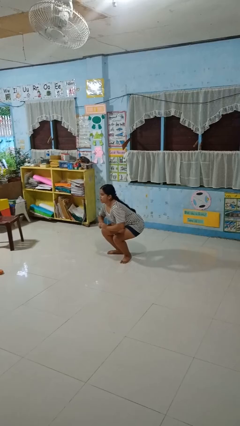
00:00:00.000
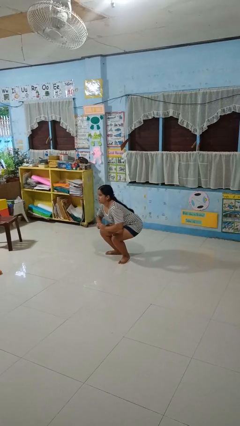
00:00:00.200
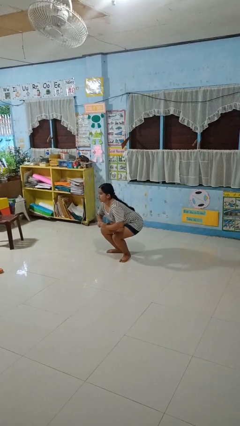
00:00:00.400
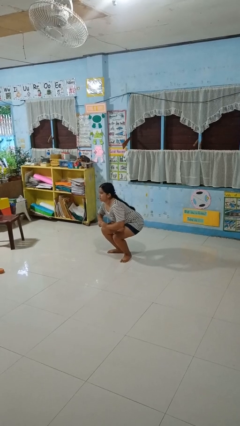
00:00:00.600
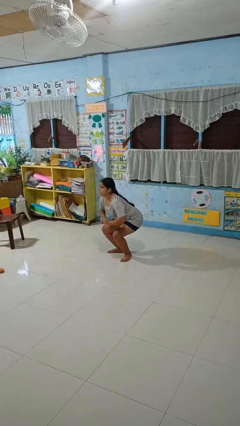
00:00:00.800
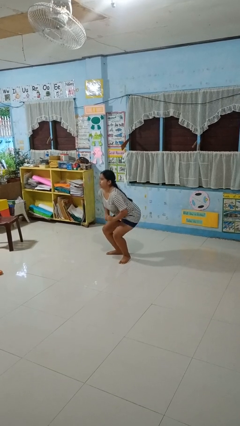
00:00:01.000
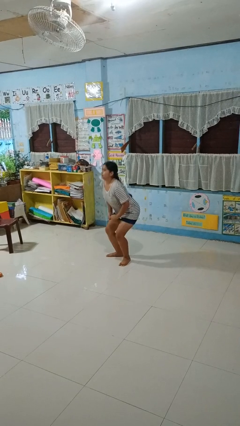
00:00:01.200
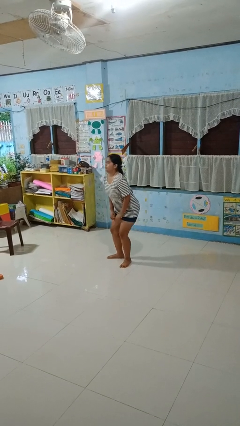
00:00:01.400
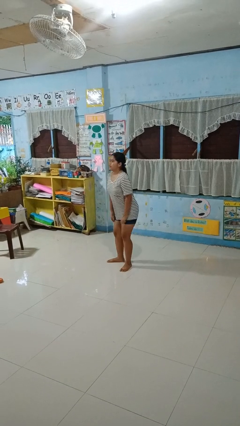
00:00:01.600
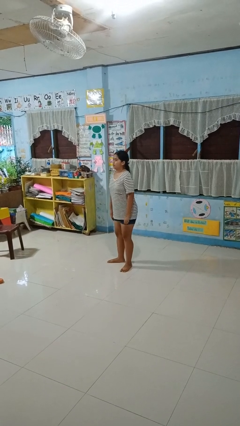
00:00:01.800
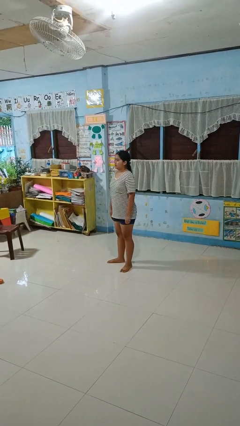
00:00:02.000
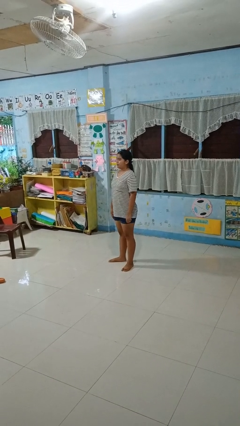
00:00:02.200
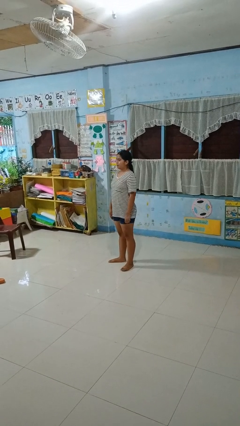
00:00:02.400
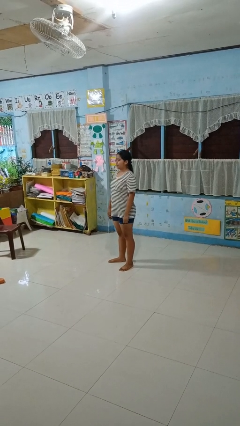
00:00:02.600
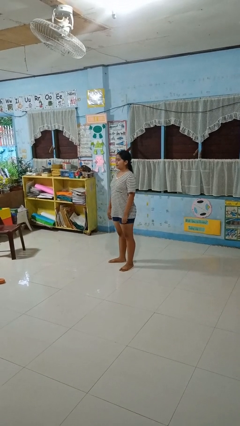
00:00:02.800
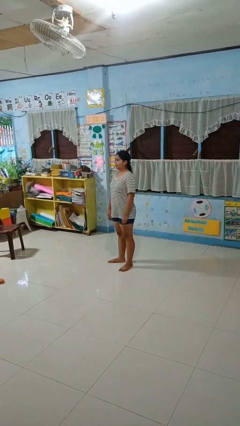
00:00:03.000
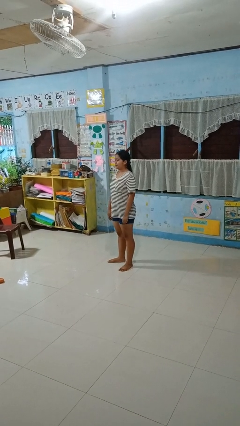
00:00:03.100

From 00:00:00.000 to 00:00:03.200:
person stands up

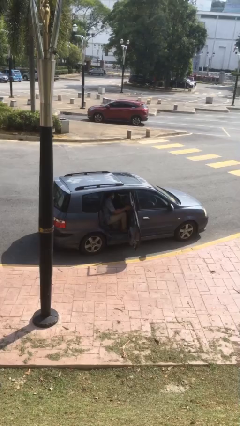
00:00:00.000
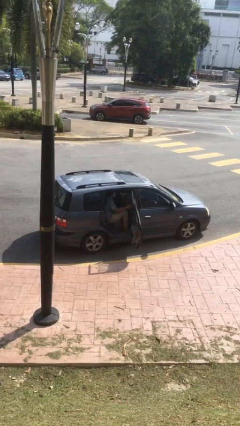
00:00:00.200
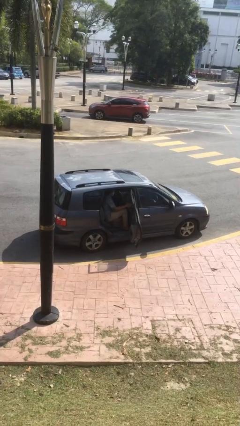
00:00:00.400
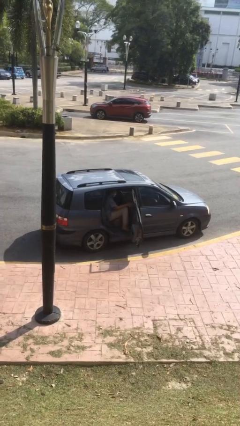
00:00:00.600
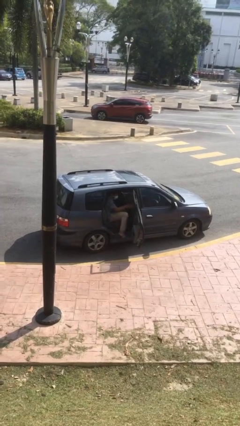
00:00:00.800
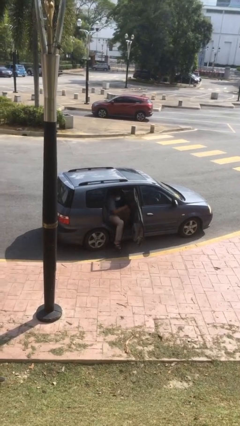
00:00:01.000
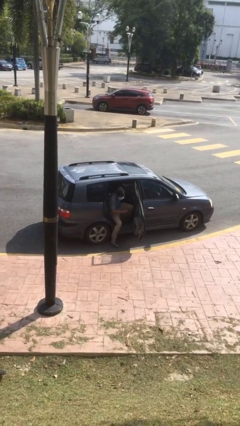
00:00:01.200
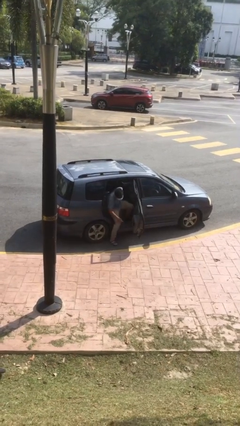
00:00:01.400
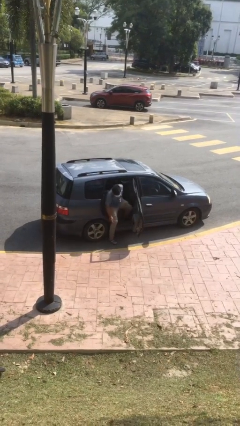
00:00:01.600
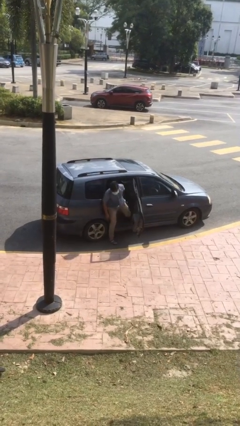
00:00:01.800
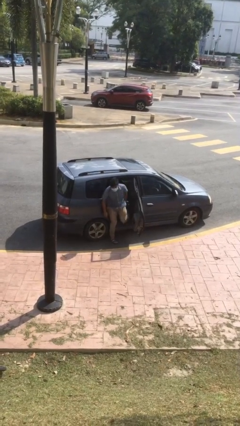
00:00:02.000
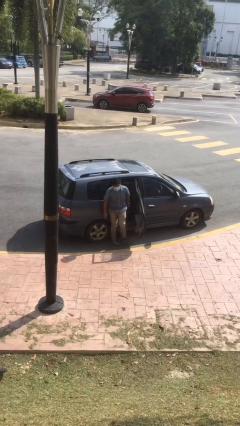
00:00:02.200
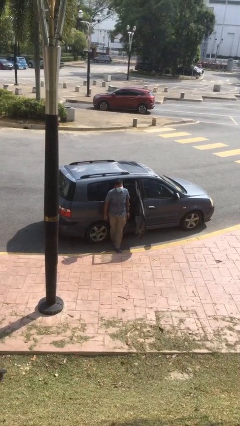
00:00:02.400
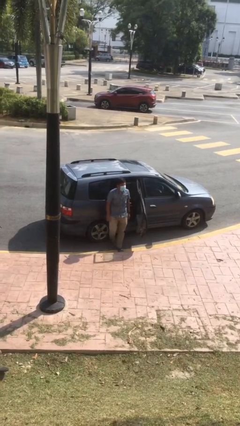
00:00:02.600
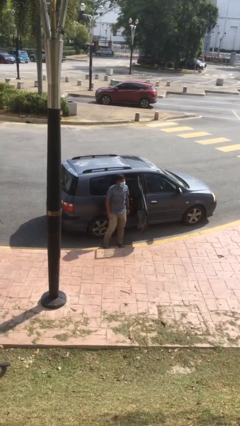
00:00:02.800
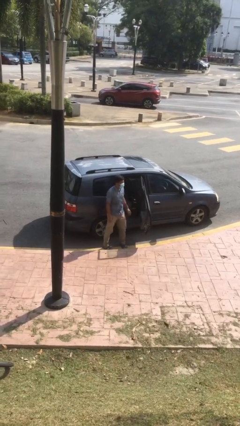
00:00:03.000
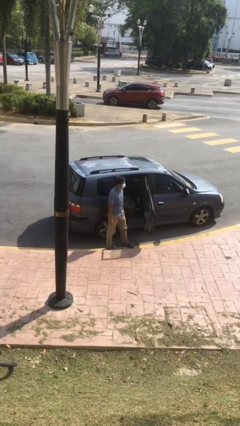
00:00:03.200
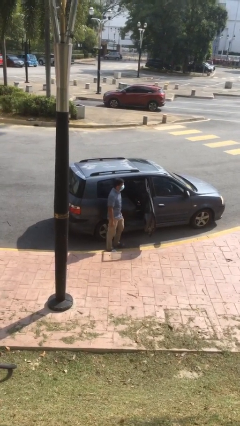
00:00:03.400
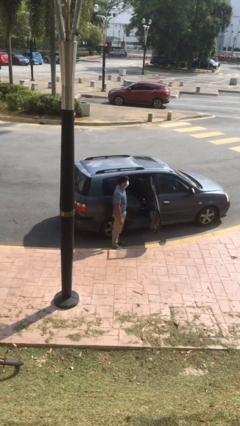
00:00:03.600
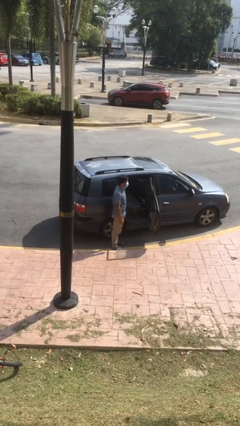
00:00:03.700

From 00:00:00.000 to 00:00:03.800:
person exits car

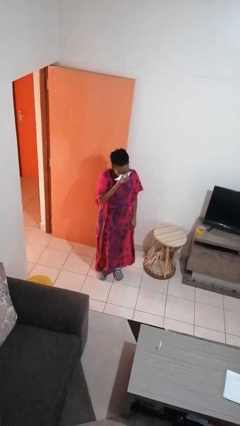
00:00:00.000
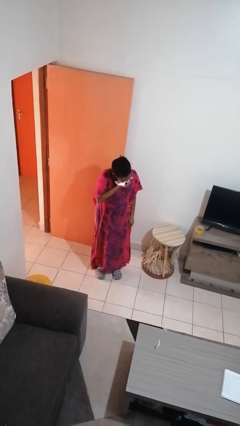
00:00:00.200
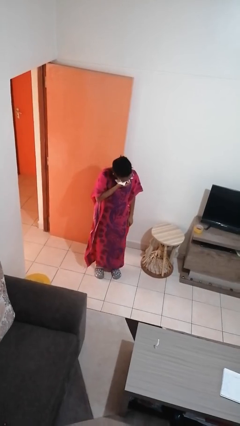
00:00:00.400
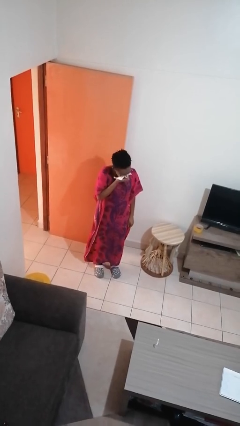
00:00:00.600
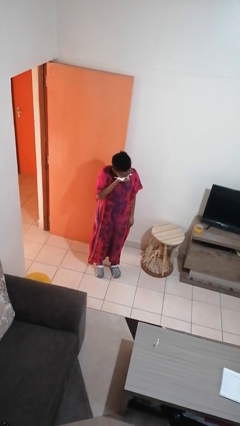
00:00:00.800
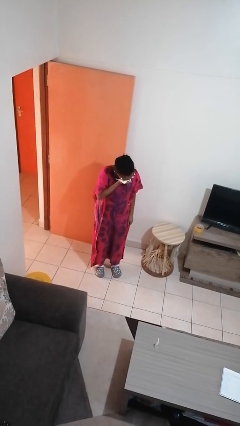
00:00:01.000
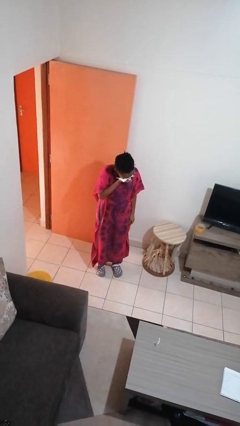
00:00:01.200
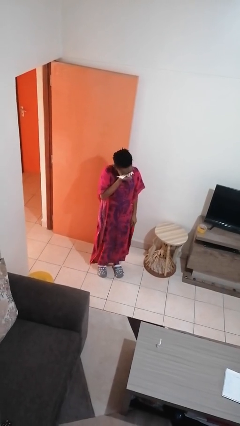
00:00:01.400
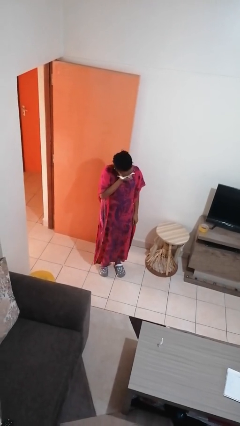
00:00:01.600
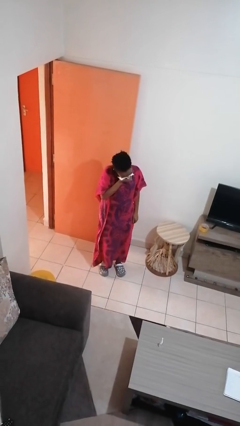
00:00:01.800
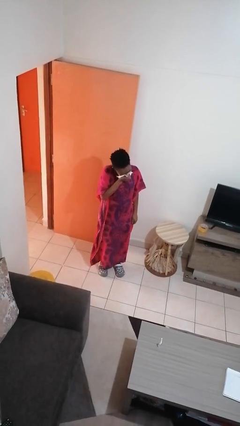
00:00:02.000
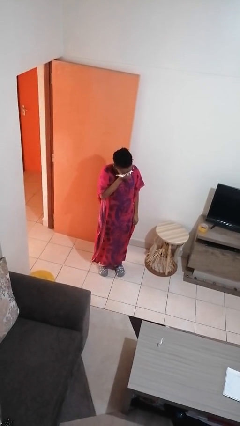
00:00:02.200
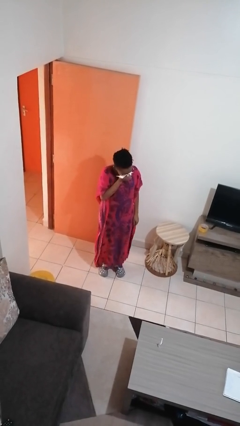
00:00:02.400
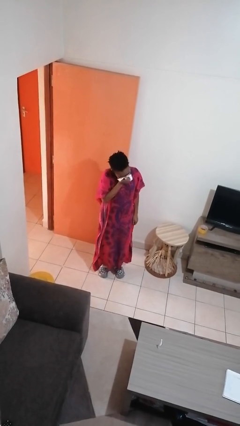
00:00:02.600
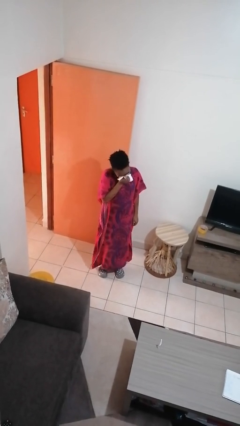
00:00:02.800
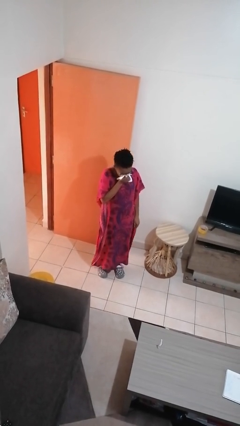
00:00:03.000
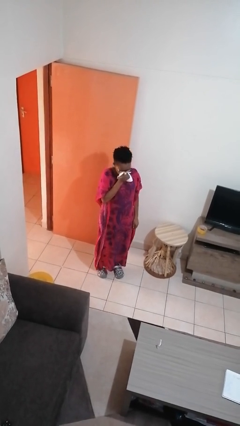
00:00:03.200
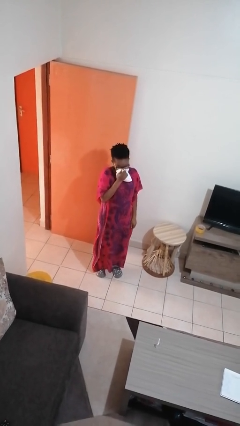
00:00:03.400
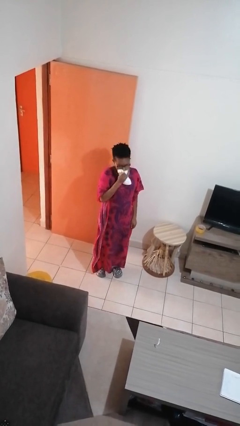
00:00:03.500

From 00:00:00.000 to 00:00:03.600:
person blows nose

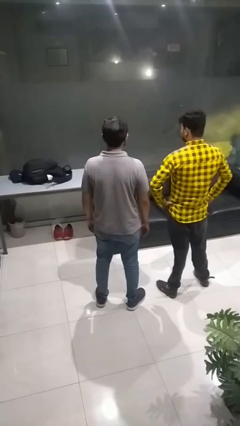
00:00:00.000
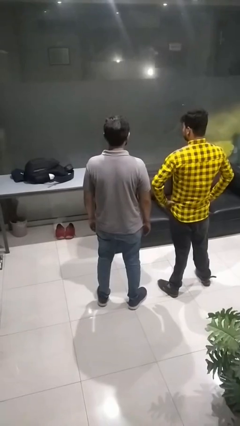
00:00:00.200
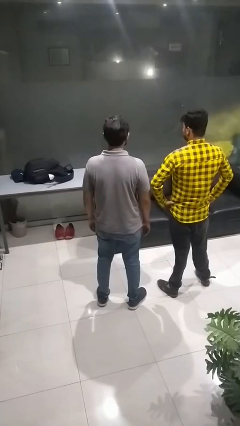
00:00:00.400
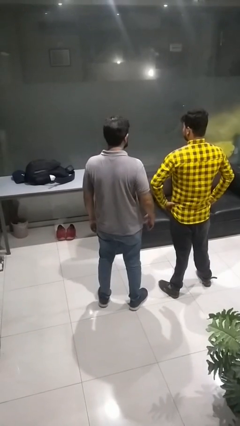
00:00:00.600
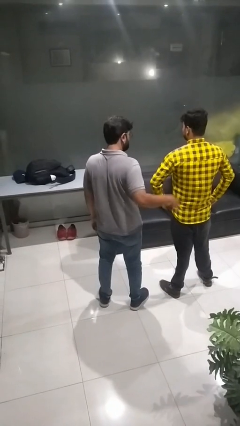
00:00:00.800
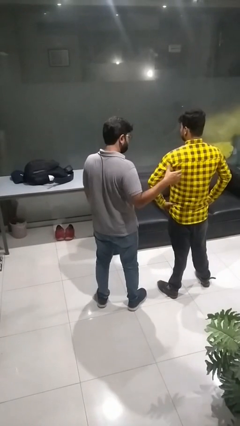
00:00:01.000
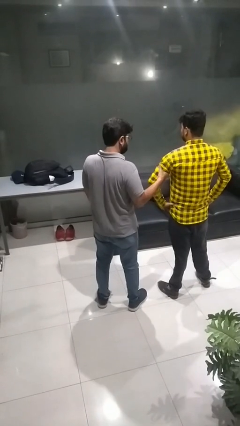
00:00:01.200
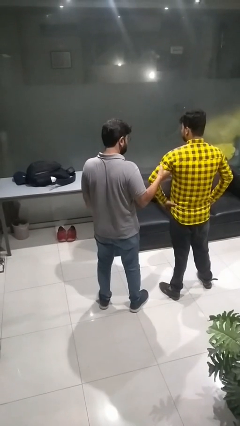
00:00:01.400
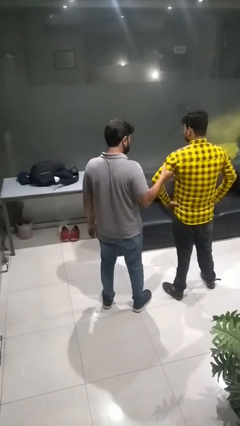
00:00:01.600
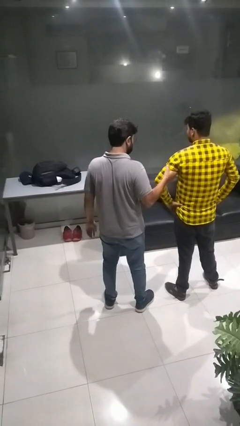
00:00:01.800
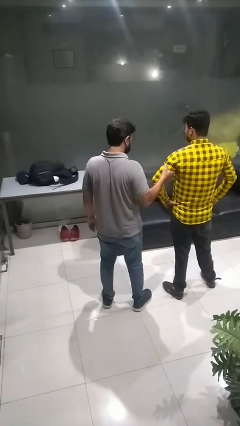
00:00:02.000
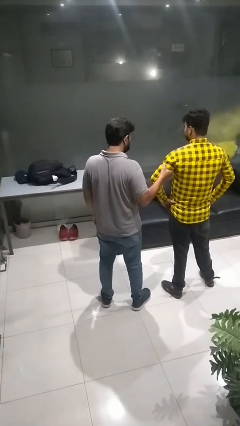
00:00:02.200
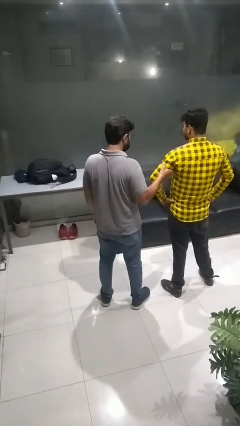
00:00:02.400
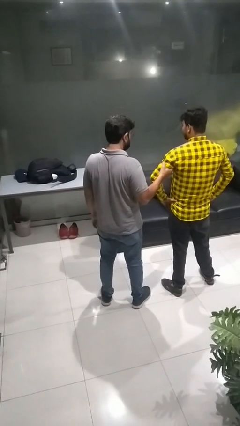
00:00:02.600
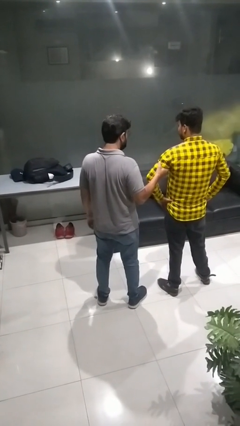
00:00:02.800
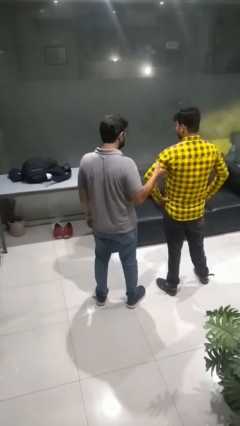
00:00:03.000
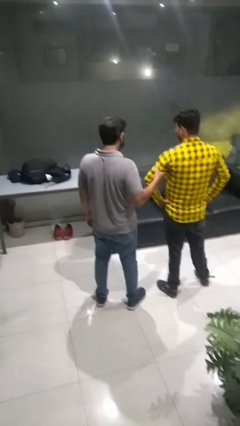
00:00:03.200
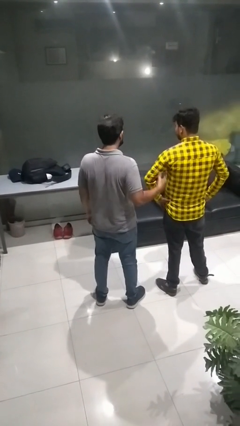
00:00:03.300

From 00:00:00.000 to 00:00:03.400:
person grabs person by bicep

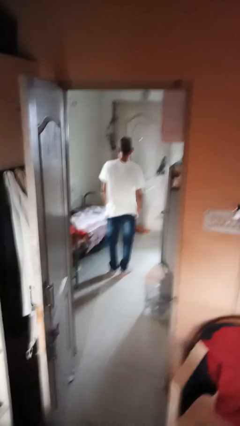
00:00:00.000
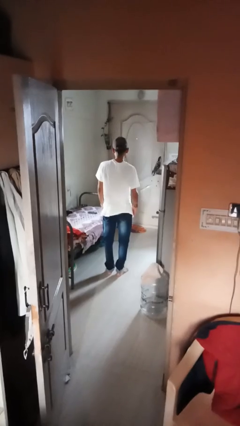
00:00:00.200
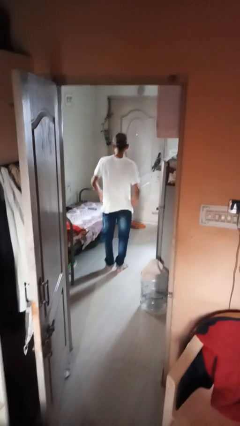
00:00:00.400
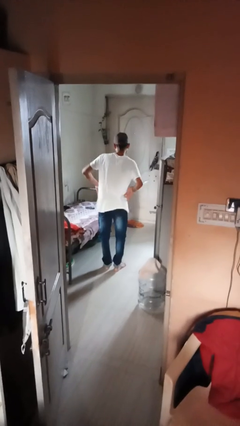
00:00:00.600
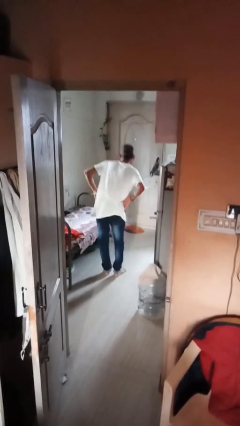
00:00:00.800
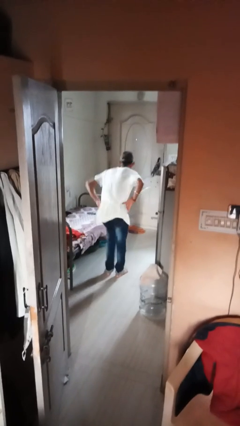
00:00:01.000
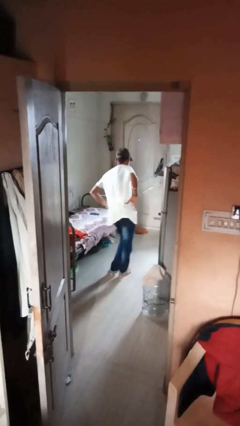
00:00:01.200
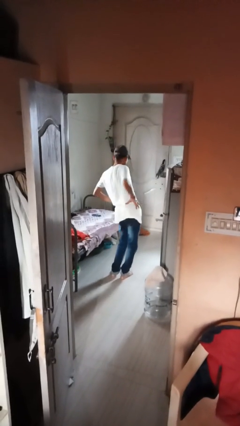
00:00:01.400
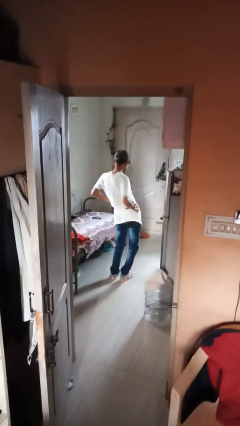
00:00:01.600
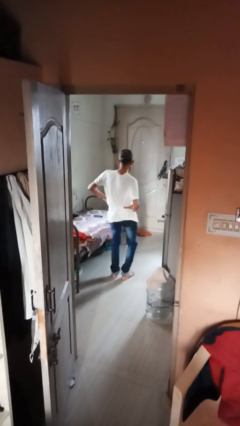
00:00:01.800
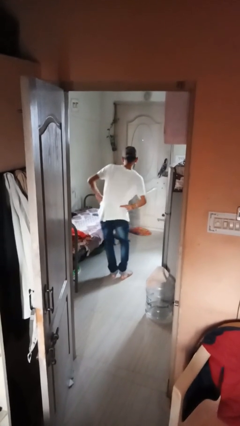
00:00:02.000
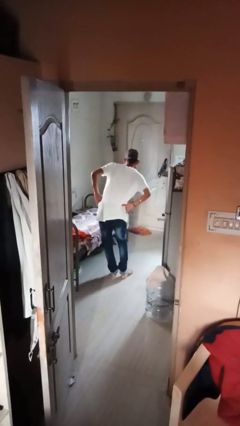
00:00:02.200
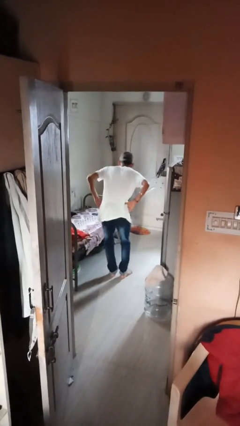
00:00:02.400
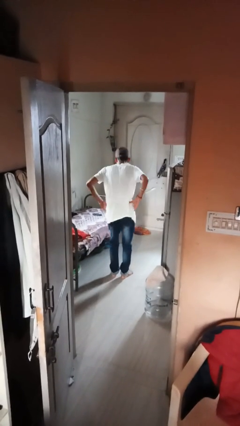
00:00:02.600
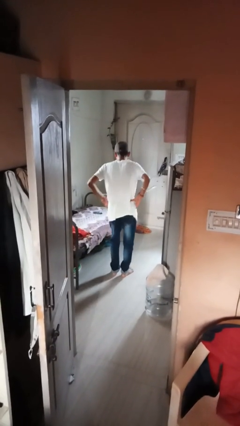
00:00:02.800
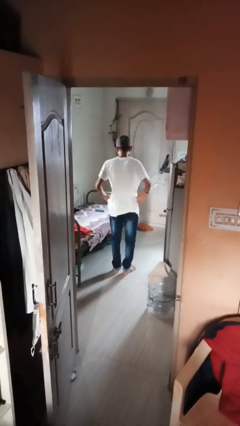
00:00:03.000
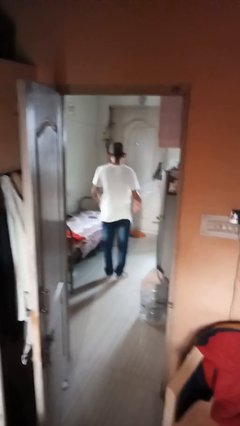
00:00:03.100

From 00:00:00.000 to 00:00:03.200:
person wiggles hips

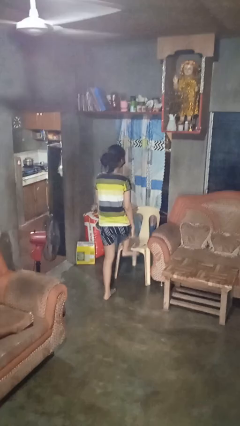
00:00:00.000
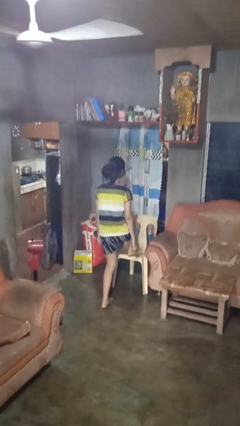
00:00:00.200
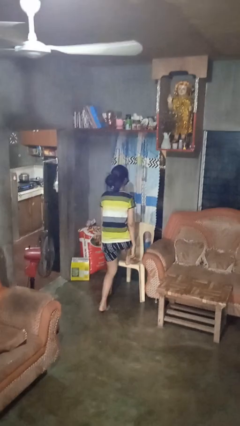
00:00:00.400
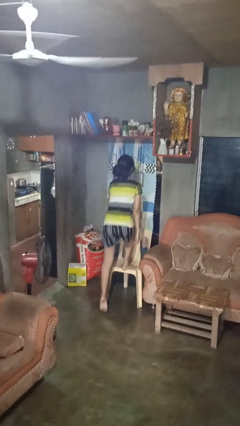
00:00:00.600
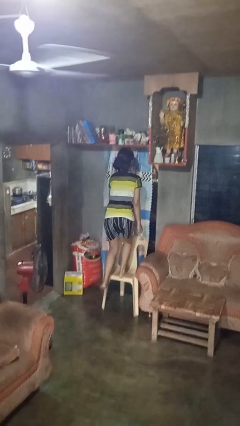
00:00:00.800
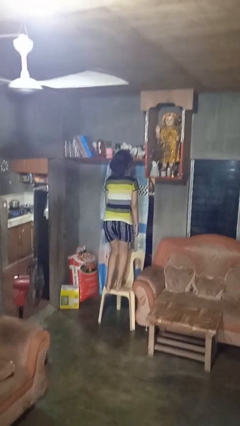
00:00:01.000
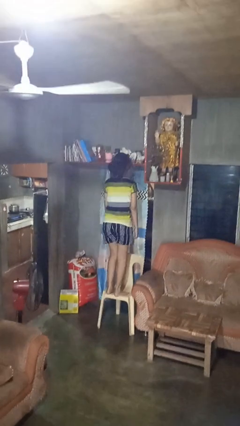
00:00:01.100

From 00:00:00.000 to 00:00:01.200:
person climbs on chair
